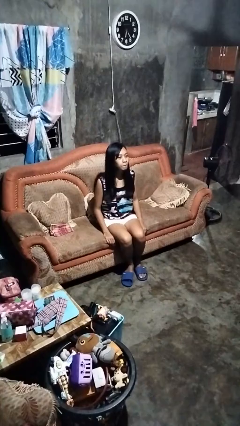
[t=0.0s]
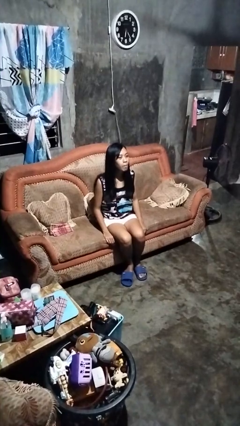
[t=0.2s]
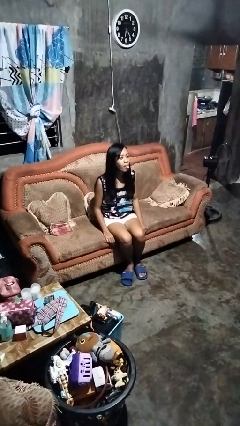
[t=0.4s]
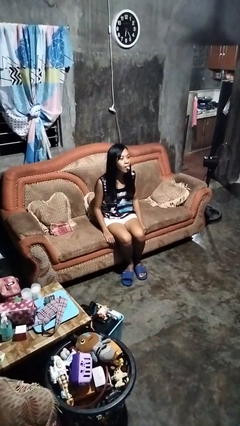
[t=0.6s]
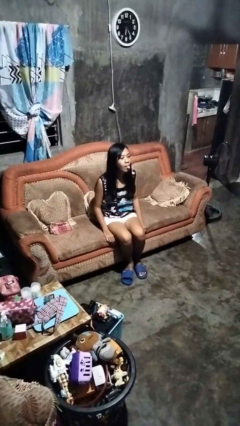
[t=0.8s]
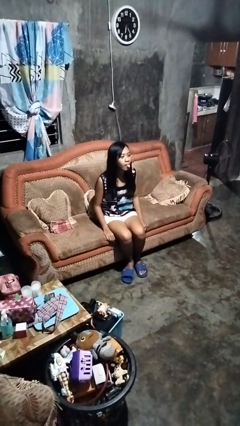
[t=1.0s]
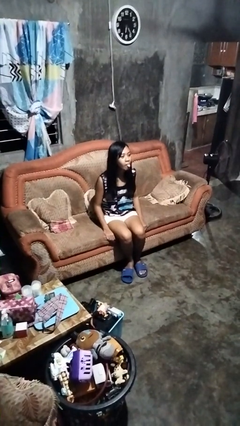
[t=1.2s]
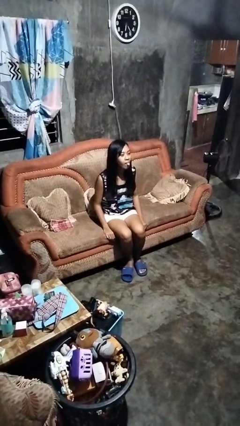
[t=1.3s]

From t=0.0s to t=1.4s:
person sticks out tongue

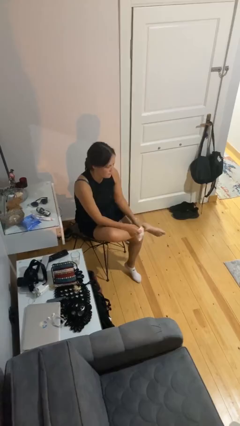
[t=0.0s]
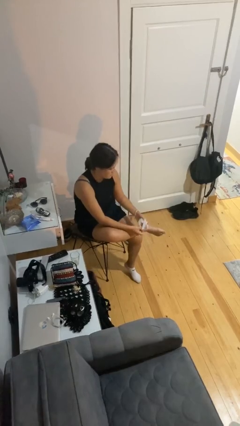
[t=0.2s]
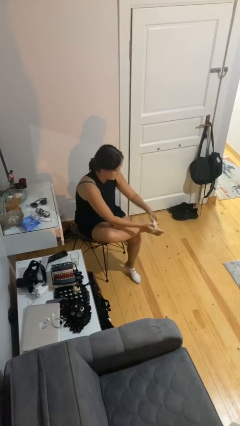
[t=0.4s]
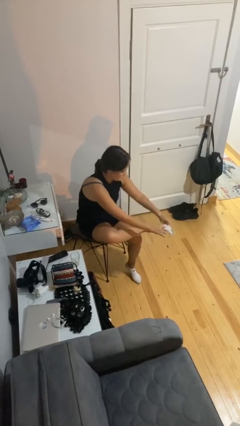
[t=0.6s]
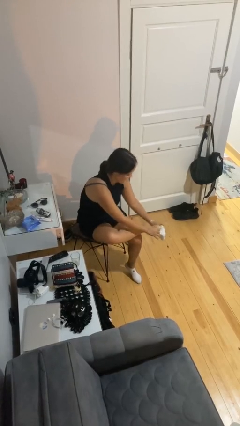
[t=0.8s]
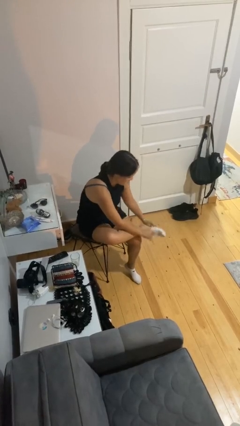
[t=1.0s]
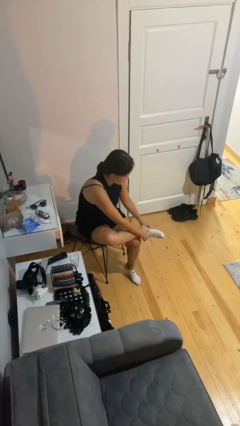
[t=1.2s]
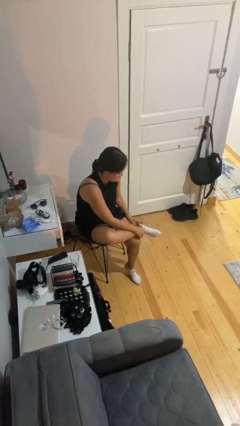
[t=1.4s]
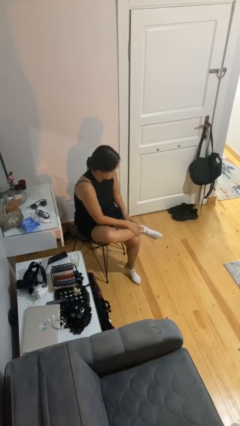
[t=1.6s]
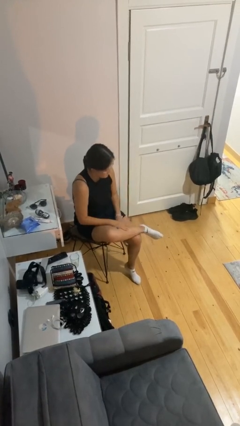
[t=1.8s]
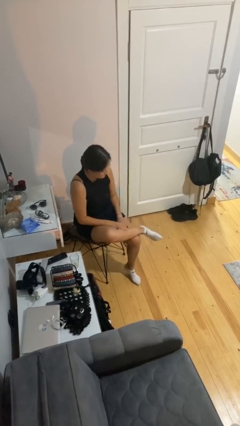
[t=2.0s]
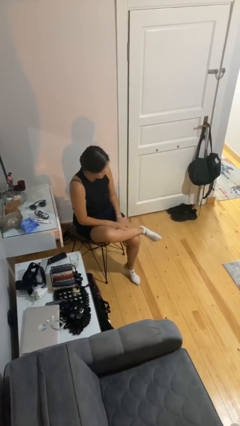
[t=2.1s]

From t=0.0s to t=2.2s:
person puts on socks

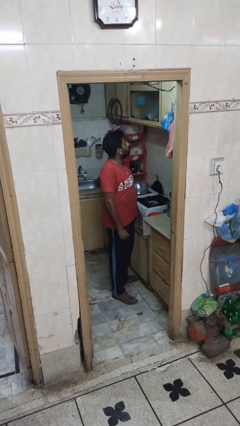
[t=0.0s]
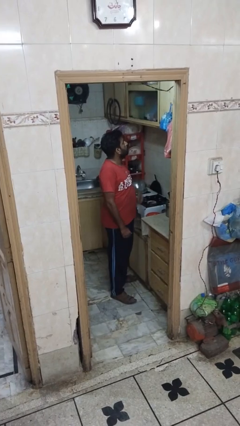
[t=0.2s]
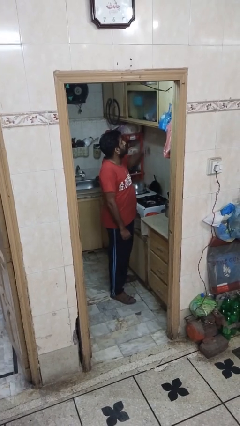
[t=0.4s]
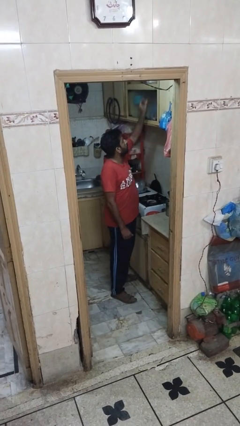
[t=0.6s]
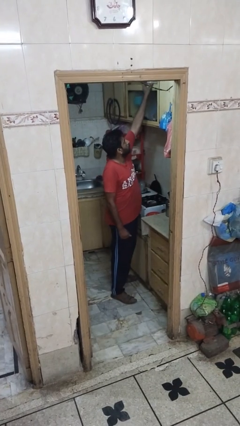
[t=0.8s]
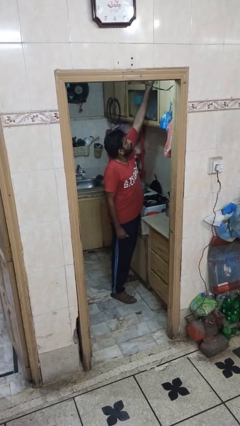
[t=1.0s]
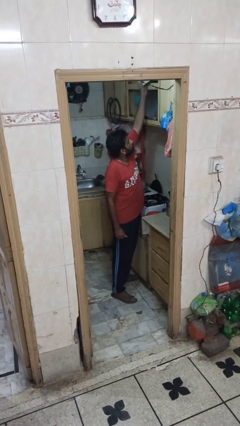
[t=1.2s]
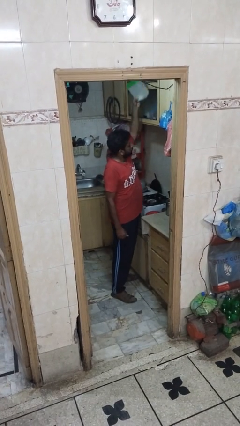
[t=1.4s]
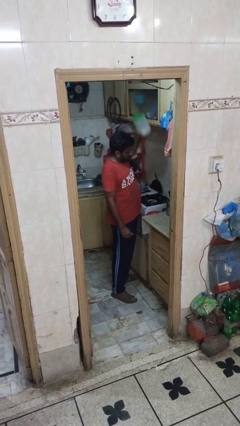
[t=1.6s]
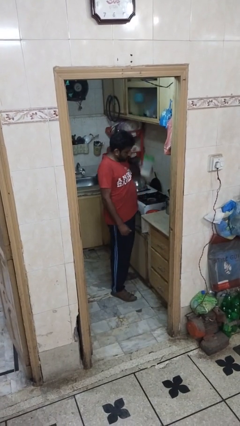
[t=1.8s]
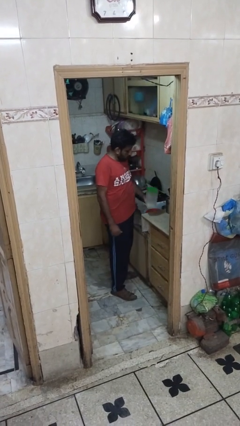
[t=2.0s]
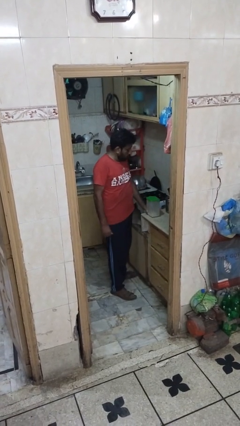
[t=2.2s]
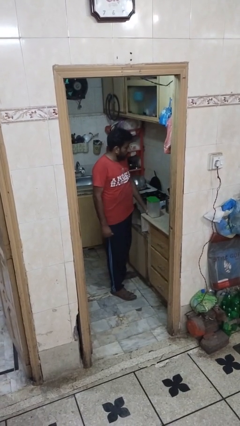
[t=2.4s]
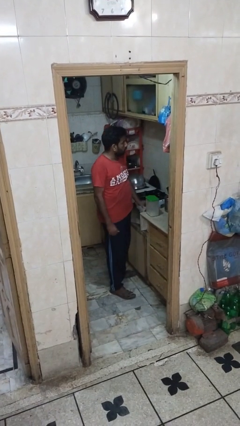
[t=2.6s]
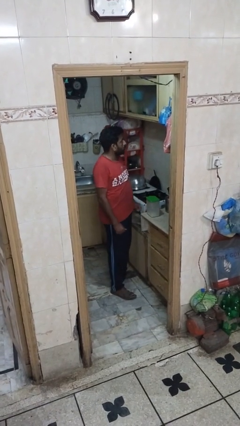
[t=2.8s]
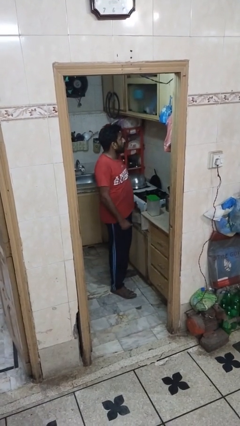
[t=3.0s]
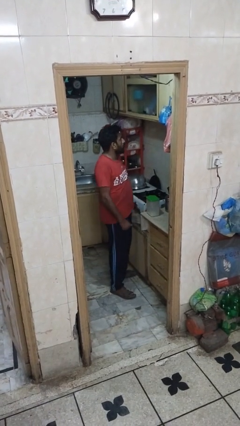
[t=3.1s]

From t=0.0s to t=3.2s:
person puts down object on shelf

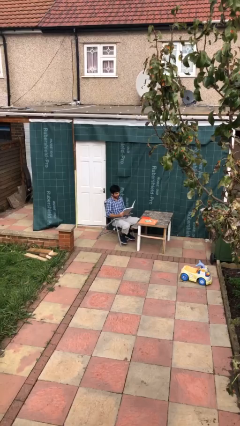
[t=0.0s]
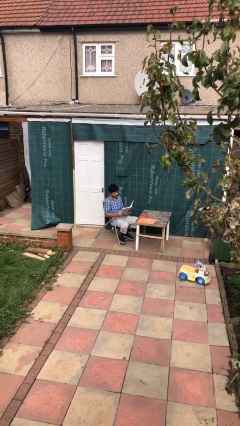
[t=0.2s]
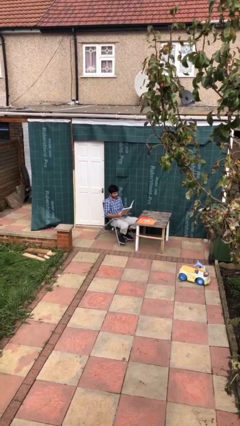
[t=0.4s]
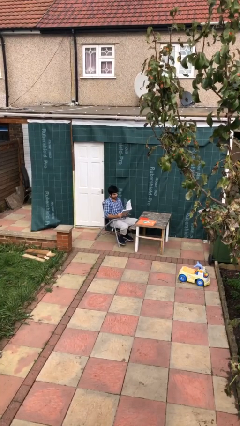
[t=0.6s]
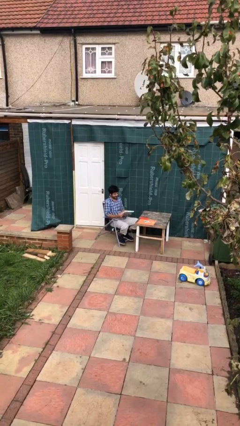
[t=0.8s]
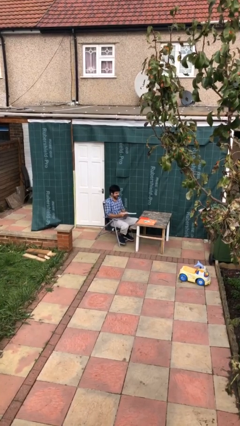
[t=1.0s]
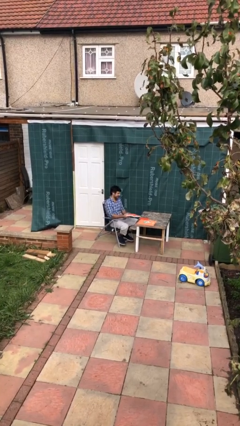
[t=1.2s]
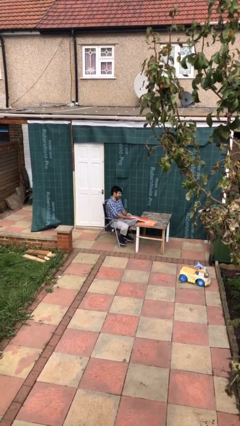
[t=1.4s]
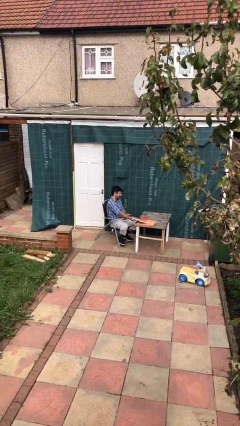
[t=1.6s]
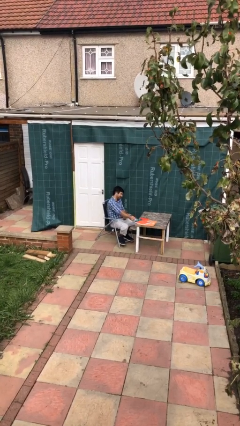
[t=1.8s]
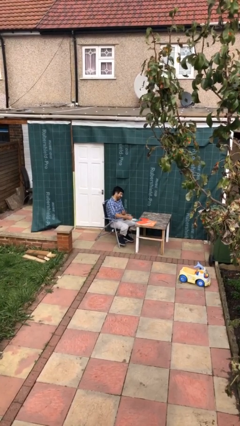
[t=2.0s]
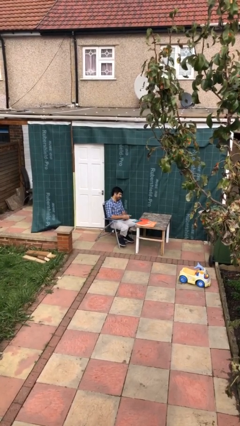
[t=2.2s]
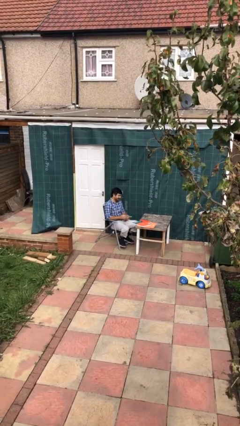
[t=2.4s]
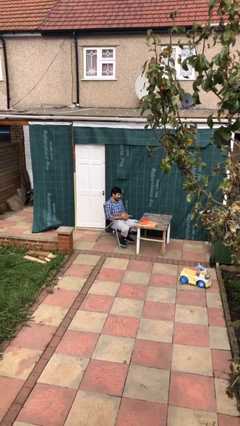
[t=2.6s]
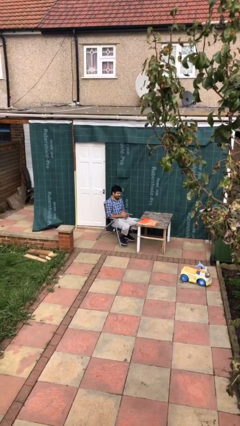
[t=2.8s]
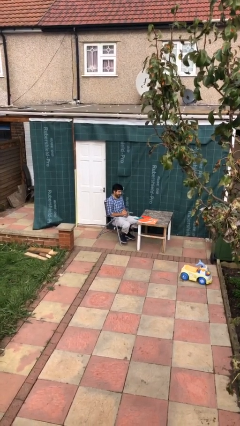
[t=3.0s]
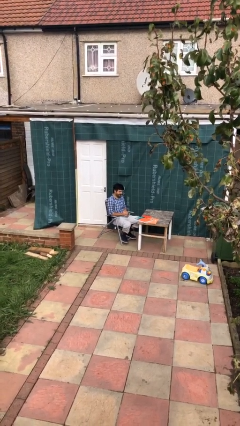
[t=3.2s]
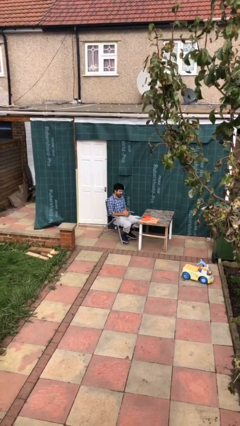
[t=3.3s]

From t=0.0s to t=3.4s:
person puts down object on table

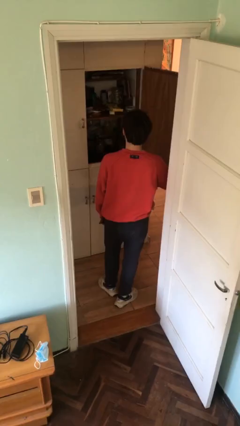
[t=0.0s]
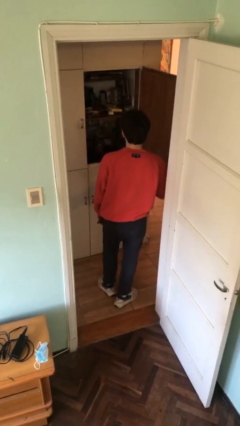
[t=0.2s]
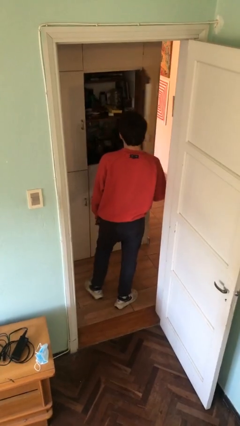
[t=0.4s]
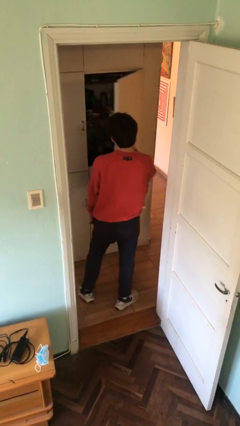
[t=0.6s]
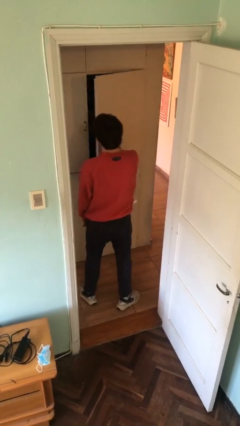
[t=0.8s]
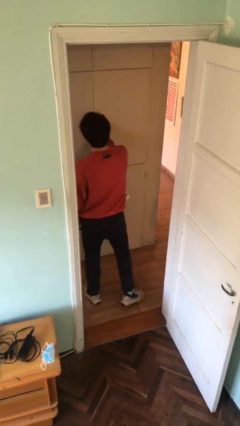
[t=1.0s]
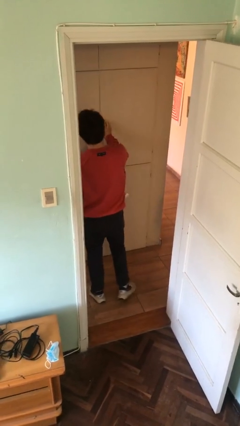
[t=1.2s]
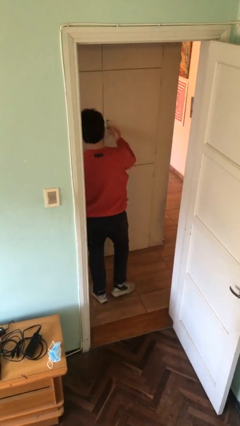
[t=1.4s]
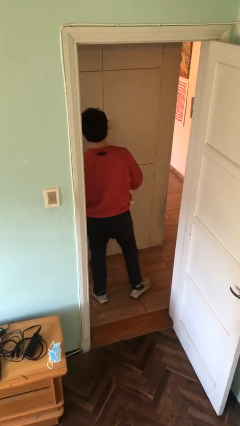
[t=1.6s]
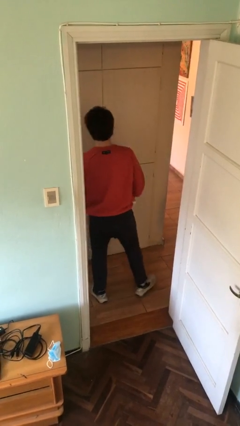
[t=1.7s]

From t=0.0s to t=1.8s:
person closes closet door

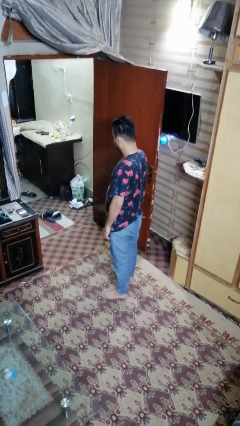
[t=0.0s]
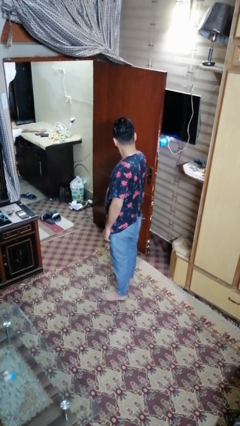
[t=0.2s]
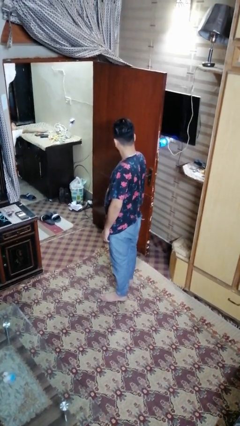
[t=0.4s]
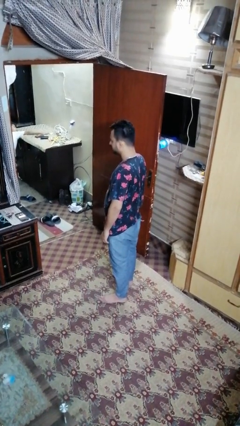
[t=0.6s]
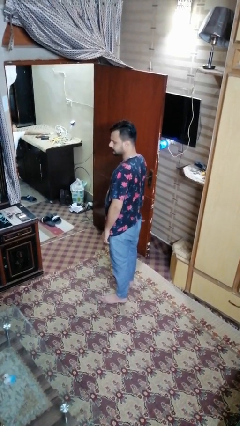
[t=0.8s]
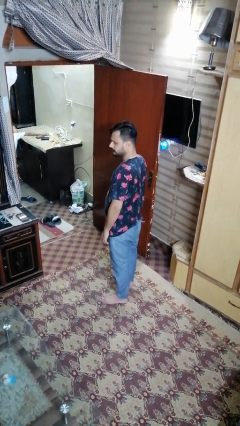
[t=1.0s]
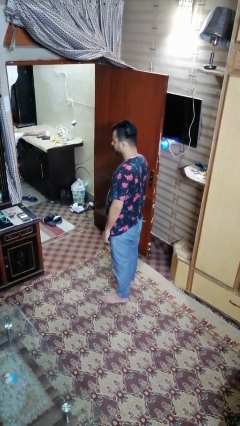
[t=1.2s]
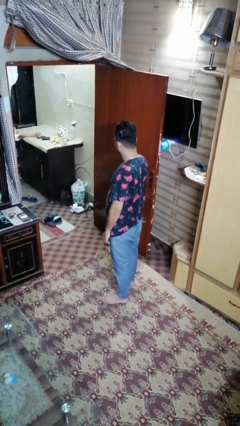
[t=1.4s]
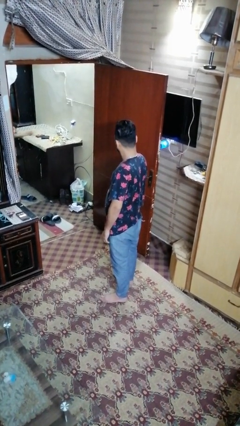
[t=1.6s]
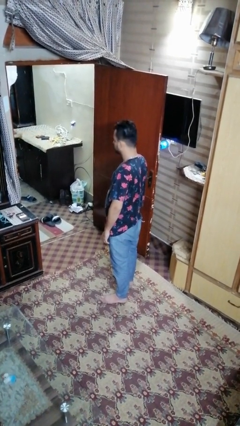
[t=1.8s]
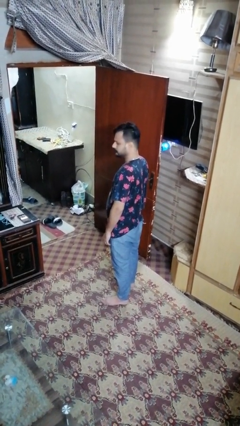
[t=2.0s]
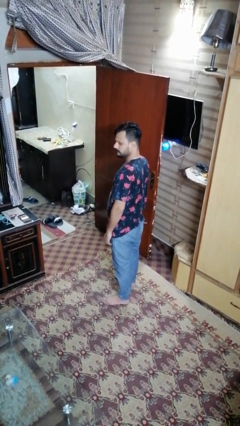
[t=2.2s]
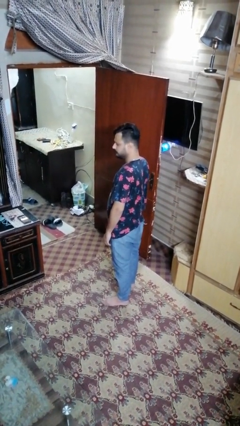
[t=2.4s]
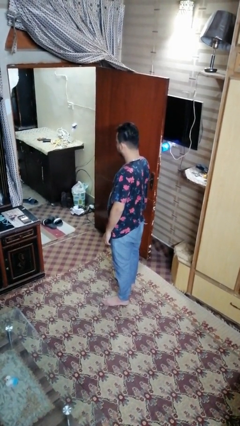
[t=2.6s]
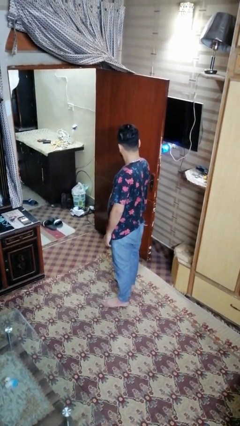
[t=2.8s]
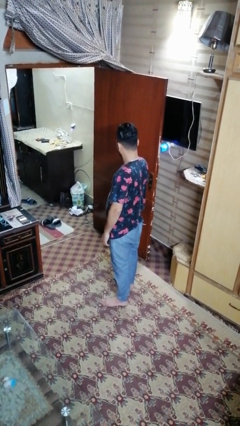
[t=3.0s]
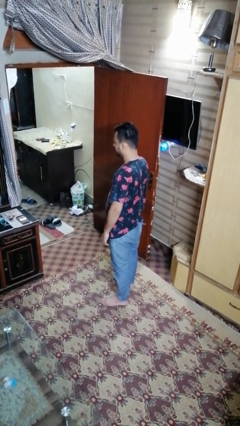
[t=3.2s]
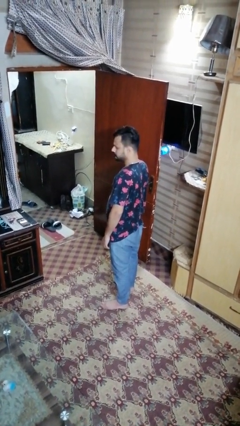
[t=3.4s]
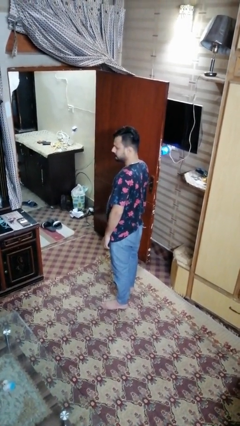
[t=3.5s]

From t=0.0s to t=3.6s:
person shakes head

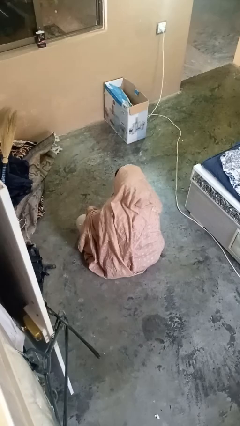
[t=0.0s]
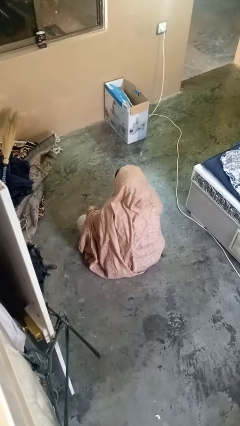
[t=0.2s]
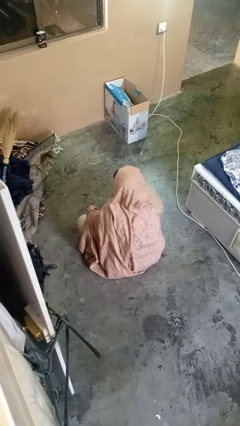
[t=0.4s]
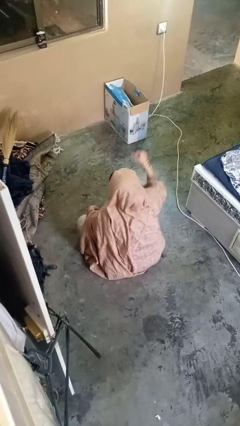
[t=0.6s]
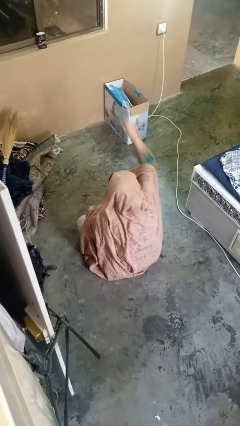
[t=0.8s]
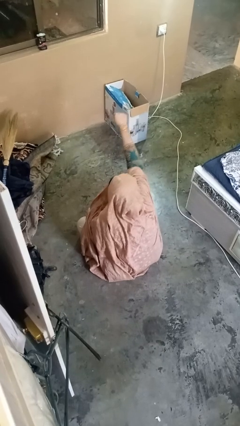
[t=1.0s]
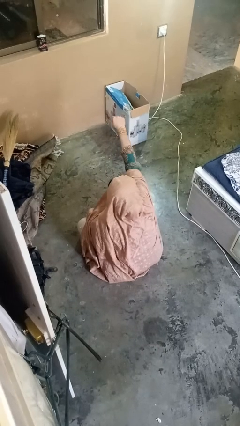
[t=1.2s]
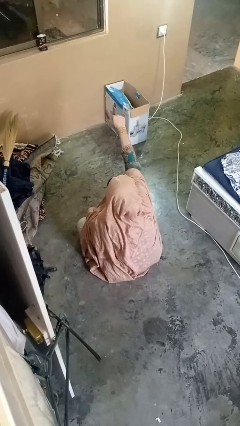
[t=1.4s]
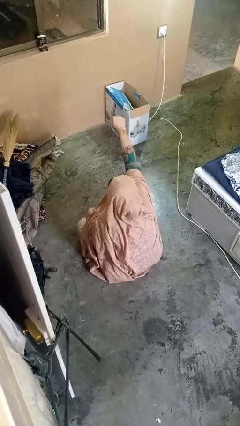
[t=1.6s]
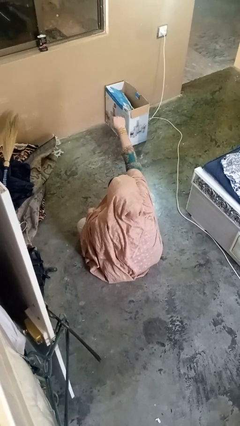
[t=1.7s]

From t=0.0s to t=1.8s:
person punches
